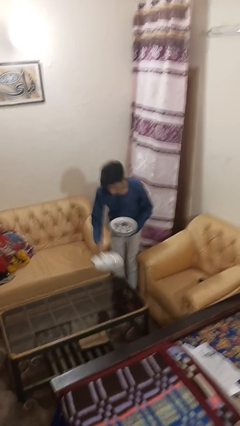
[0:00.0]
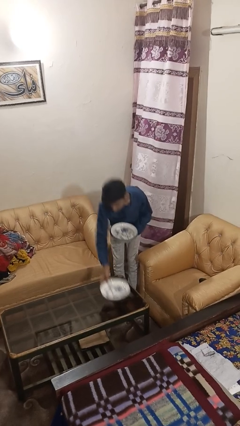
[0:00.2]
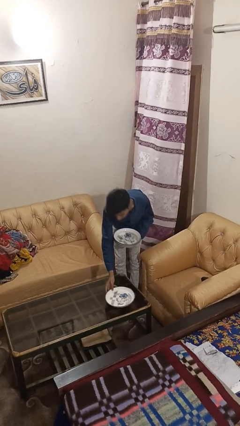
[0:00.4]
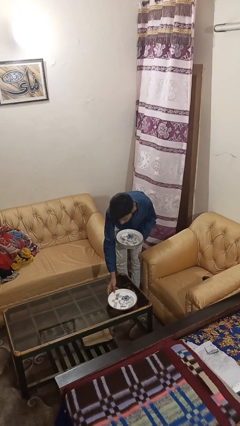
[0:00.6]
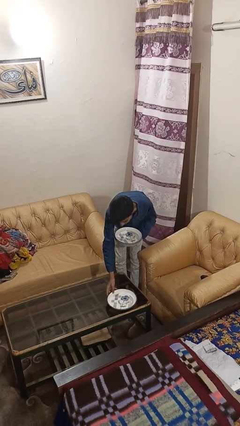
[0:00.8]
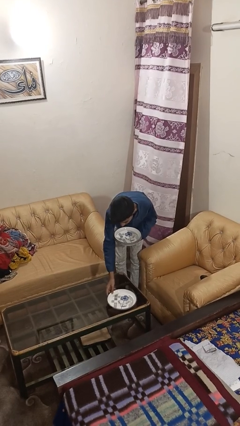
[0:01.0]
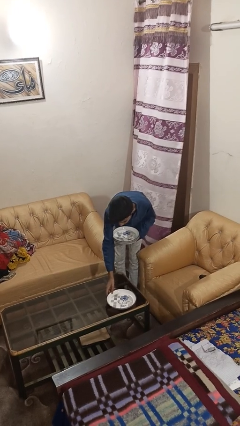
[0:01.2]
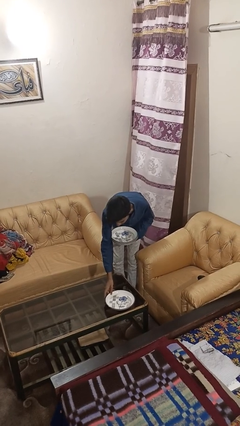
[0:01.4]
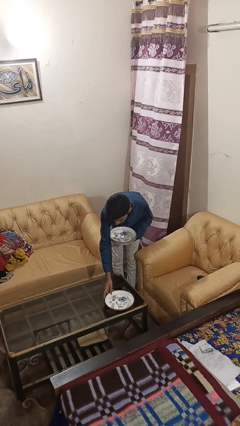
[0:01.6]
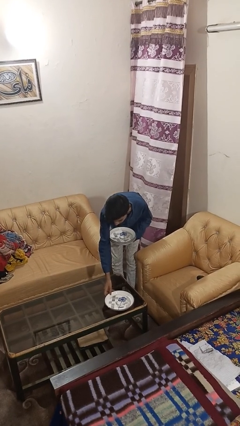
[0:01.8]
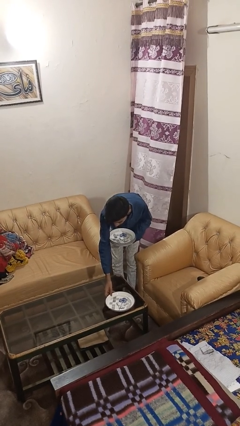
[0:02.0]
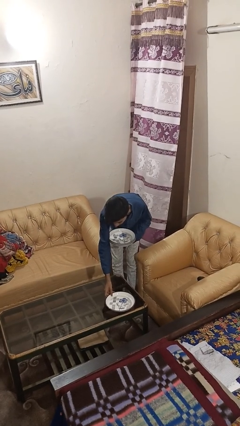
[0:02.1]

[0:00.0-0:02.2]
person sets table

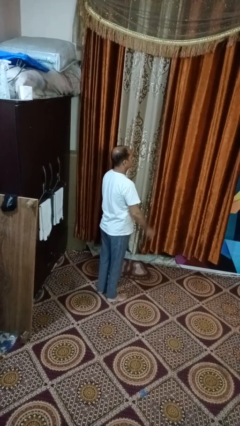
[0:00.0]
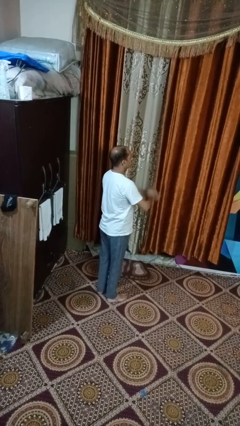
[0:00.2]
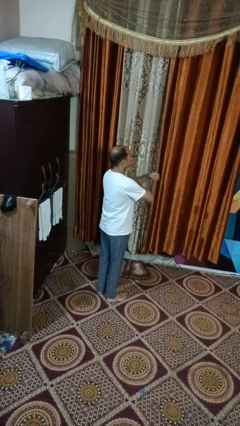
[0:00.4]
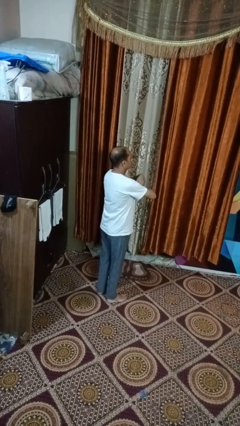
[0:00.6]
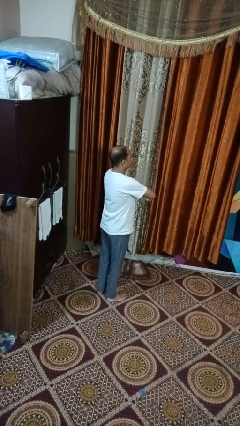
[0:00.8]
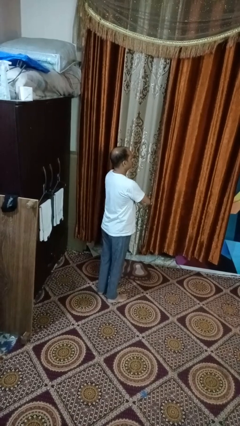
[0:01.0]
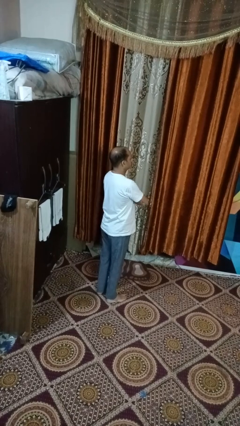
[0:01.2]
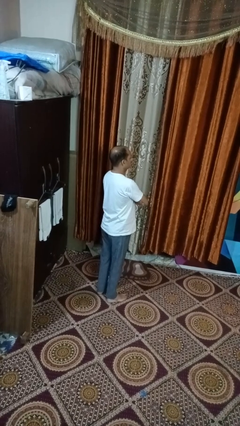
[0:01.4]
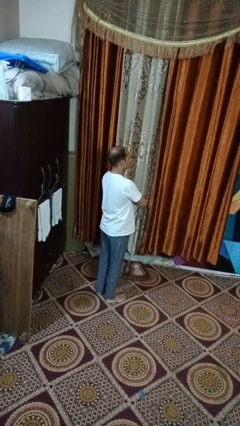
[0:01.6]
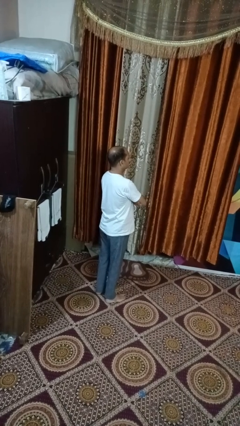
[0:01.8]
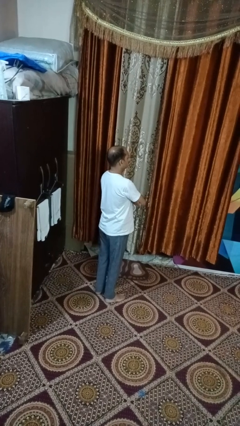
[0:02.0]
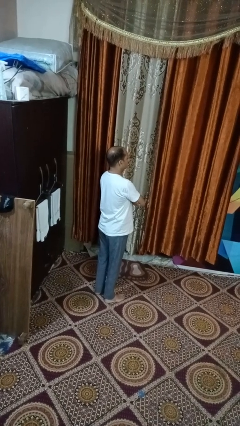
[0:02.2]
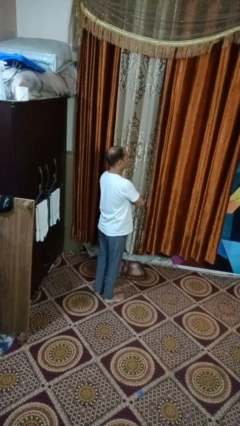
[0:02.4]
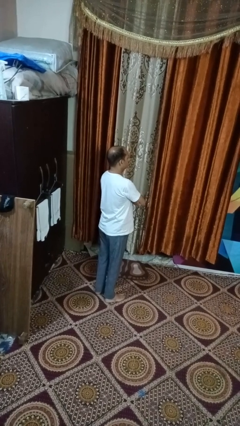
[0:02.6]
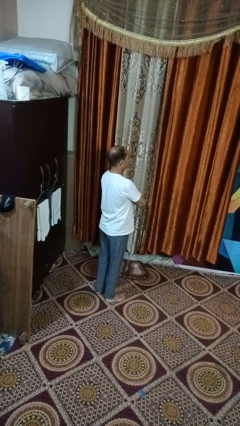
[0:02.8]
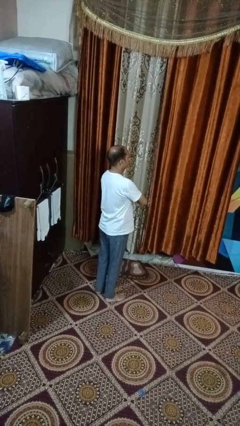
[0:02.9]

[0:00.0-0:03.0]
person crosses arms

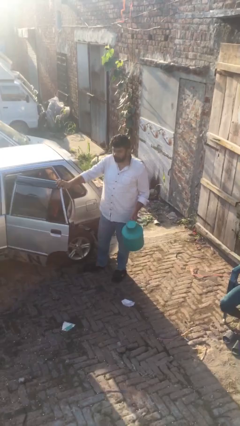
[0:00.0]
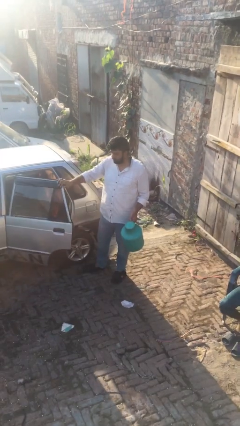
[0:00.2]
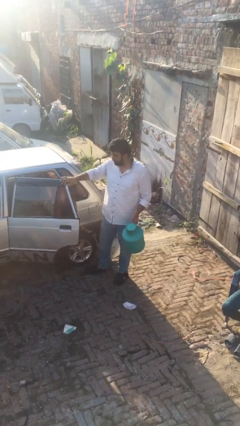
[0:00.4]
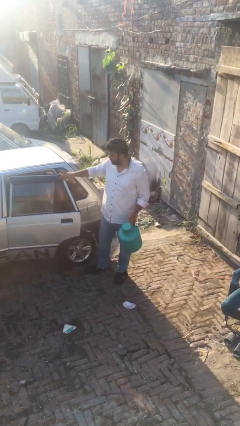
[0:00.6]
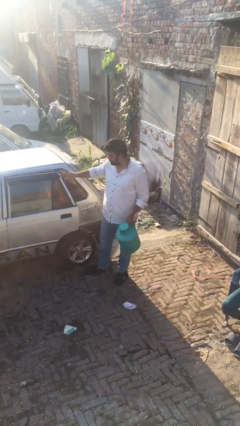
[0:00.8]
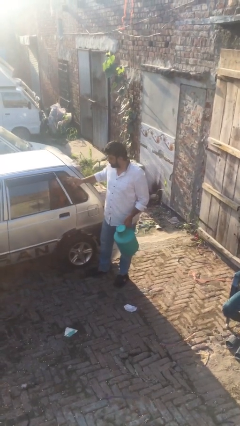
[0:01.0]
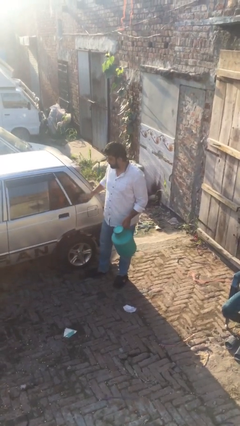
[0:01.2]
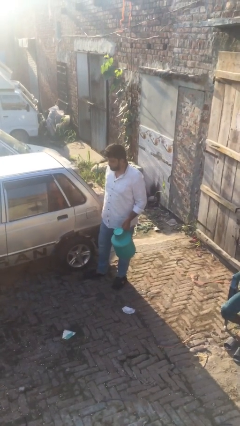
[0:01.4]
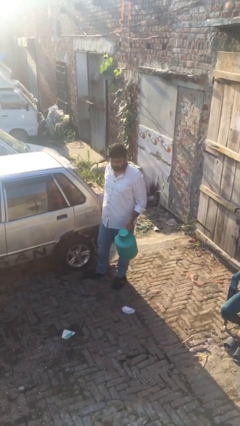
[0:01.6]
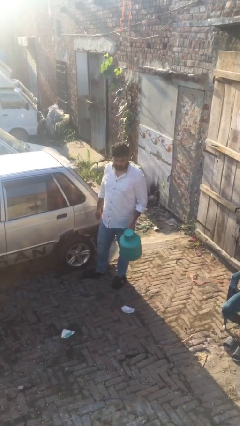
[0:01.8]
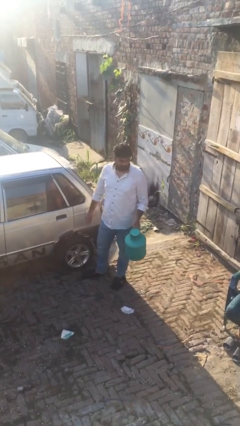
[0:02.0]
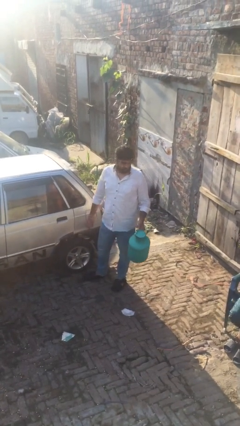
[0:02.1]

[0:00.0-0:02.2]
person closes car door

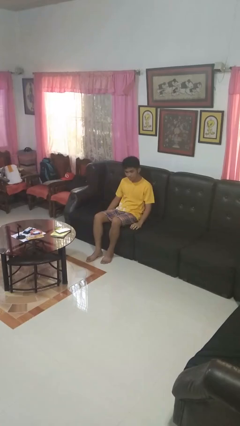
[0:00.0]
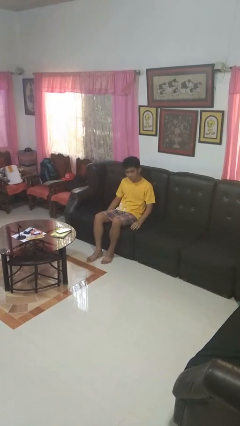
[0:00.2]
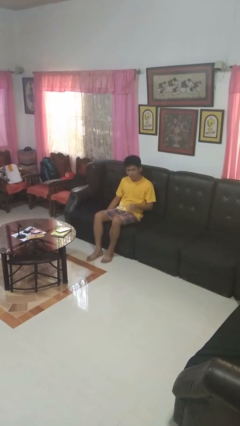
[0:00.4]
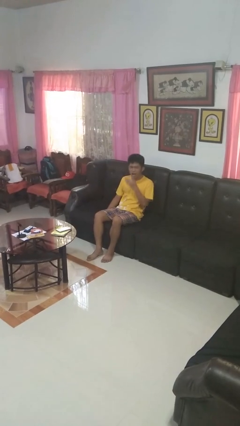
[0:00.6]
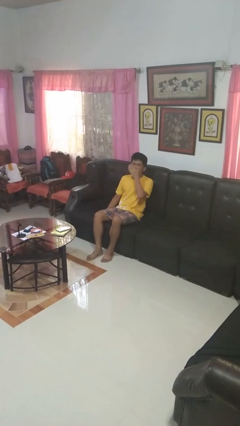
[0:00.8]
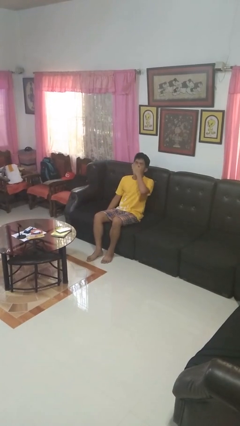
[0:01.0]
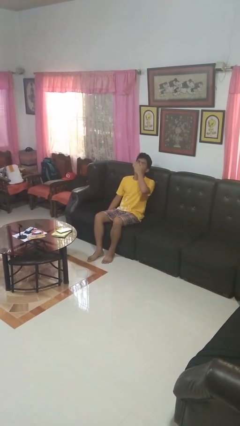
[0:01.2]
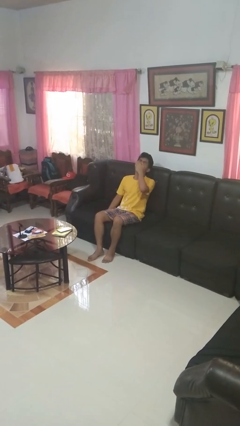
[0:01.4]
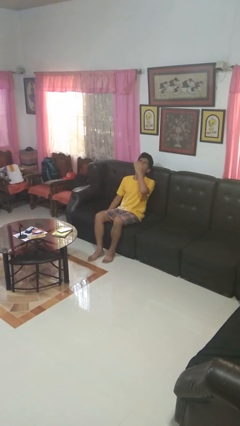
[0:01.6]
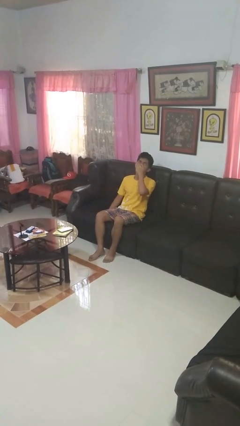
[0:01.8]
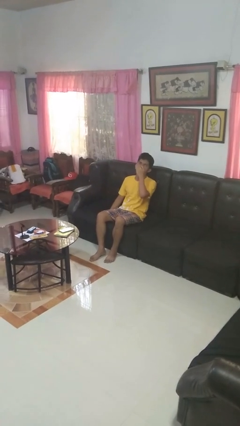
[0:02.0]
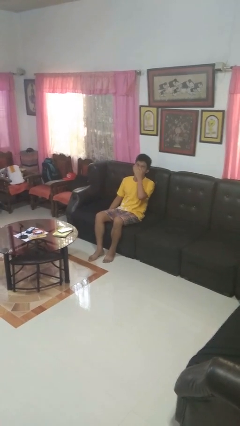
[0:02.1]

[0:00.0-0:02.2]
person yawns

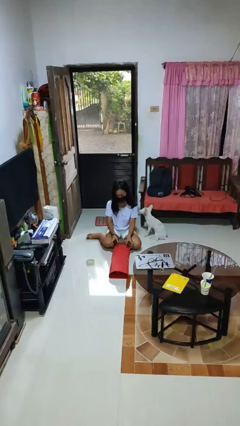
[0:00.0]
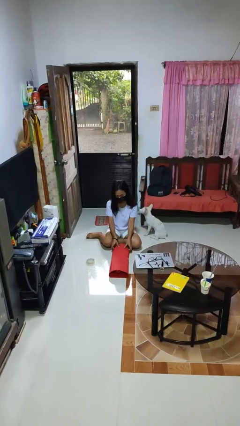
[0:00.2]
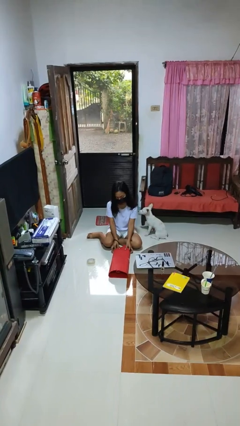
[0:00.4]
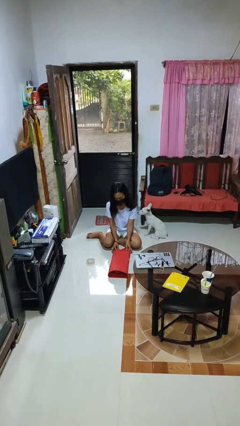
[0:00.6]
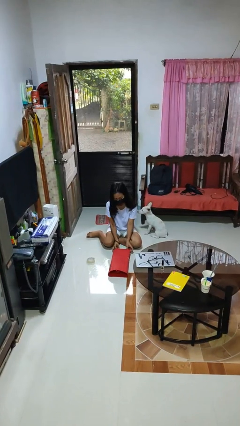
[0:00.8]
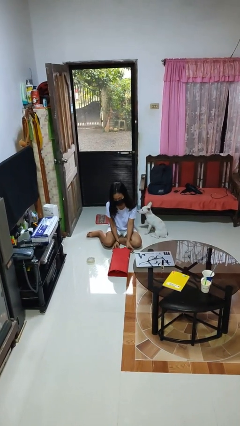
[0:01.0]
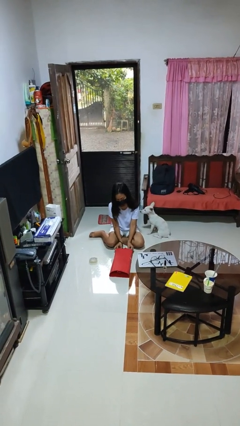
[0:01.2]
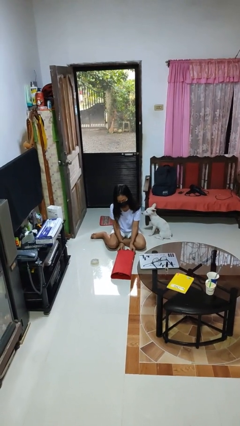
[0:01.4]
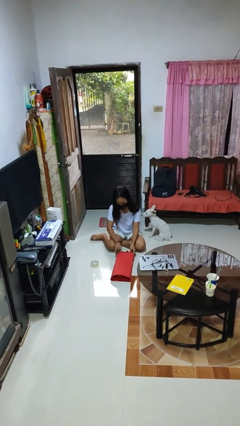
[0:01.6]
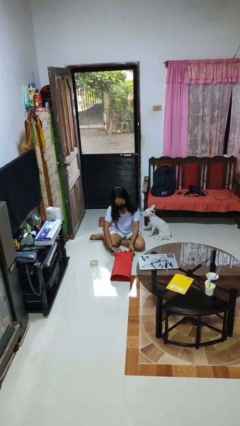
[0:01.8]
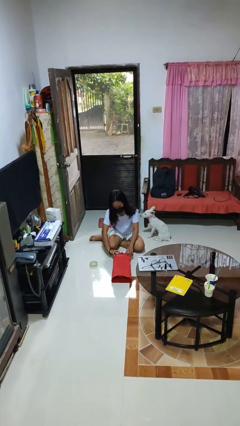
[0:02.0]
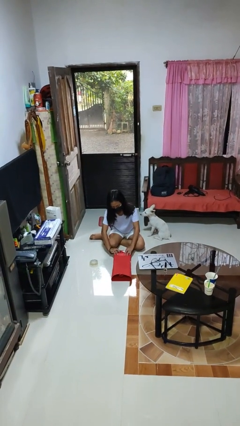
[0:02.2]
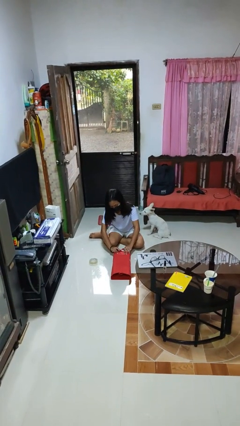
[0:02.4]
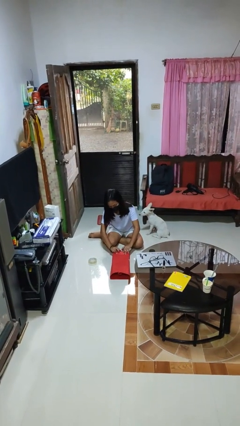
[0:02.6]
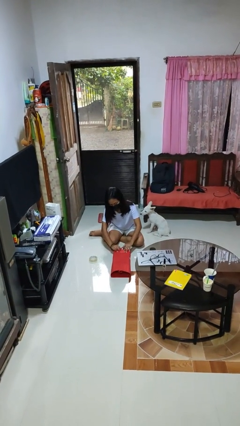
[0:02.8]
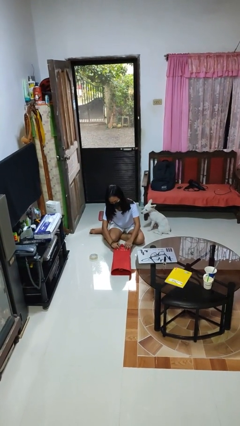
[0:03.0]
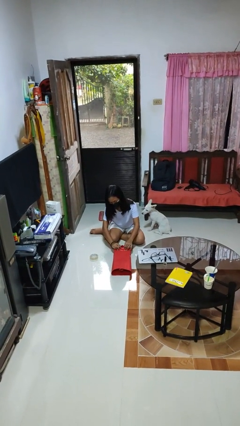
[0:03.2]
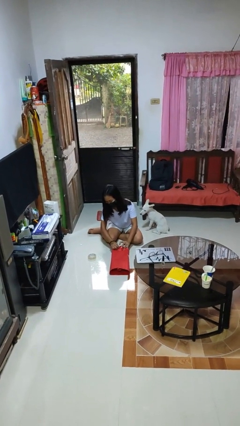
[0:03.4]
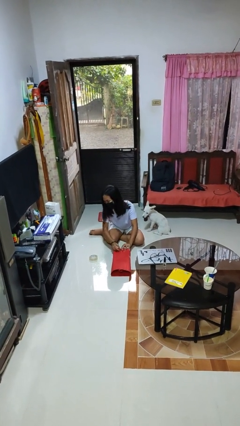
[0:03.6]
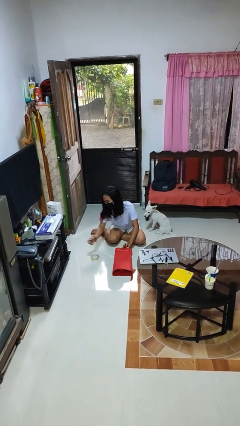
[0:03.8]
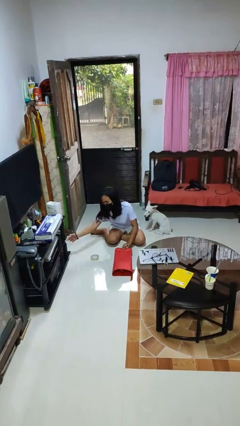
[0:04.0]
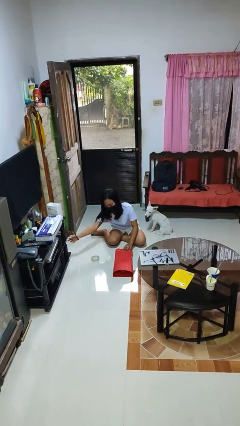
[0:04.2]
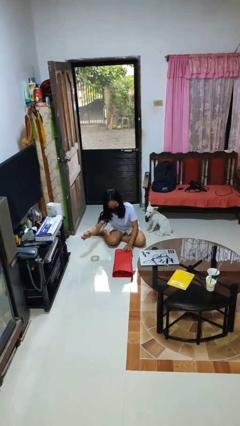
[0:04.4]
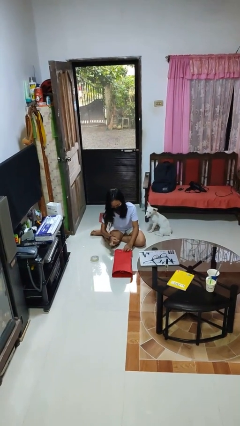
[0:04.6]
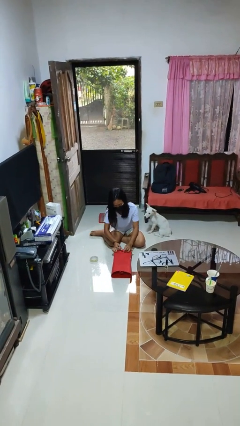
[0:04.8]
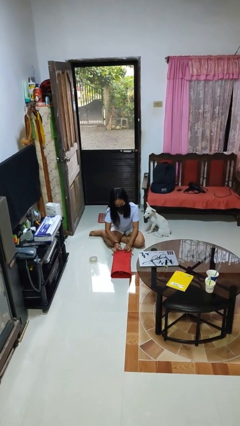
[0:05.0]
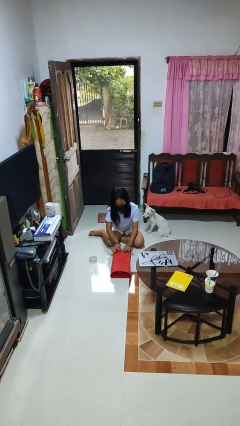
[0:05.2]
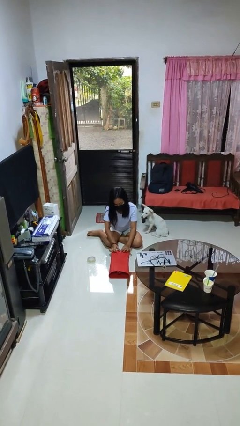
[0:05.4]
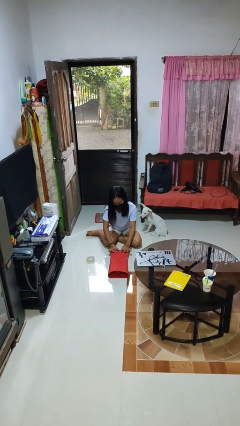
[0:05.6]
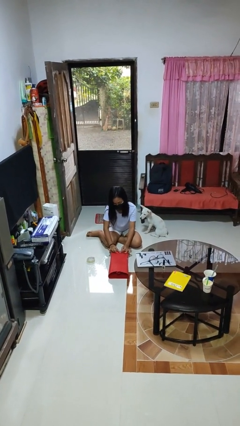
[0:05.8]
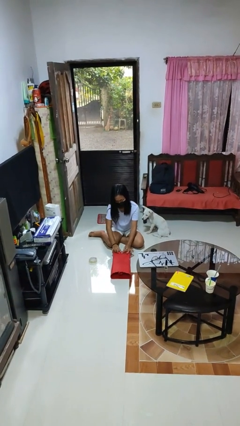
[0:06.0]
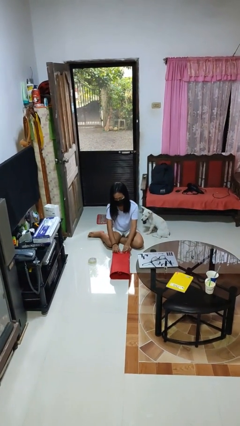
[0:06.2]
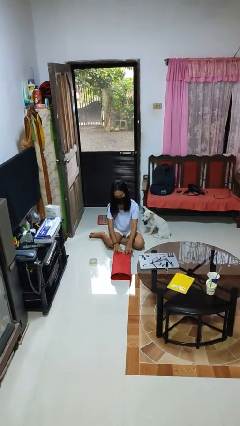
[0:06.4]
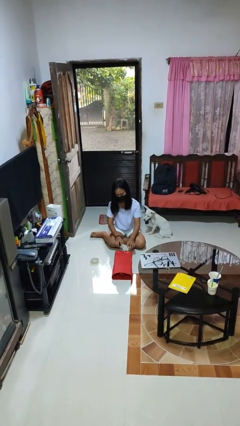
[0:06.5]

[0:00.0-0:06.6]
person wraps box

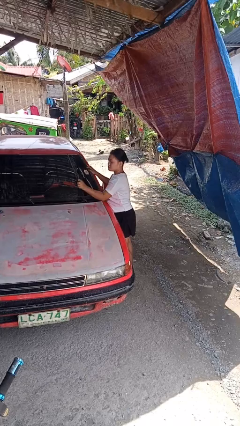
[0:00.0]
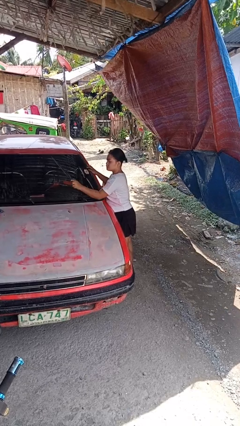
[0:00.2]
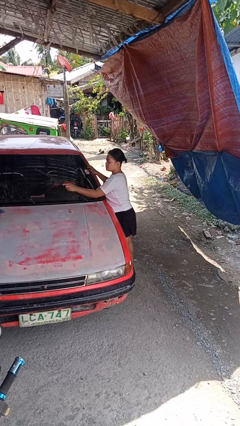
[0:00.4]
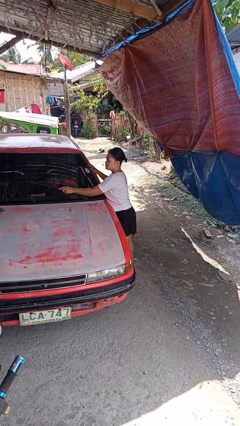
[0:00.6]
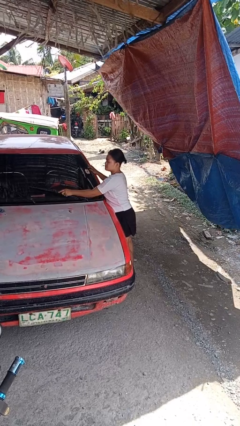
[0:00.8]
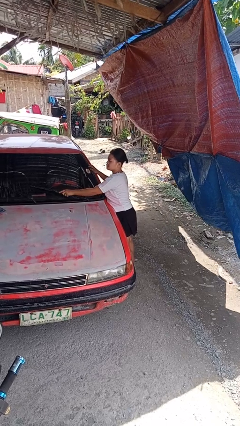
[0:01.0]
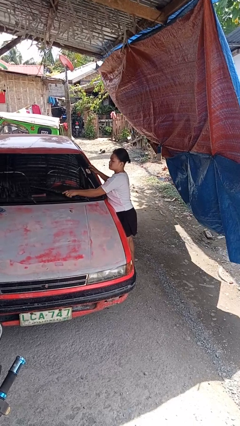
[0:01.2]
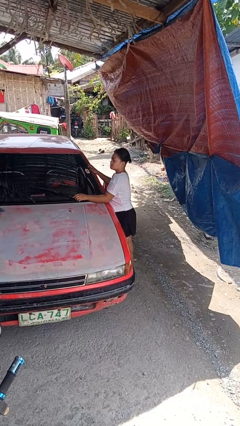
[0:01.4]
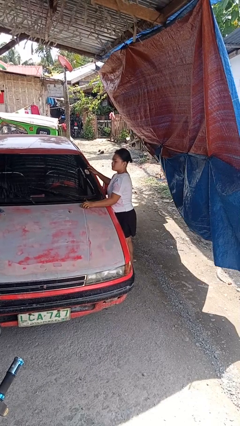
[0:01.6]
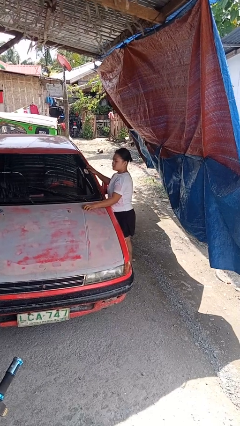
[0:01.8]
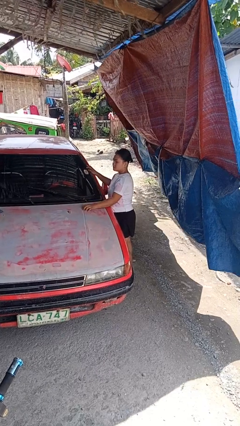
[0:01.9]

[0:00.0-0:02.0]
person flips down car wipers
